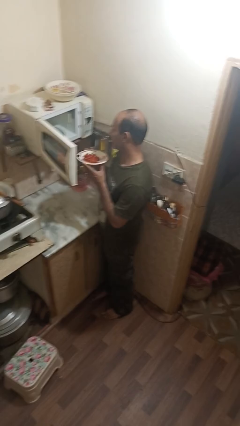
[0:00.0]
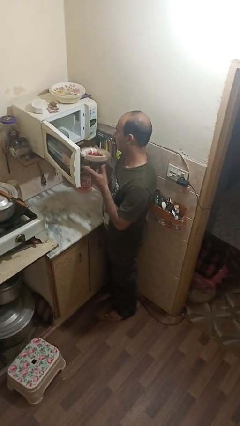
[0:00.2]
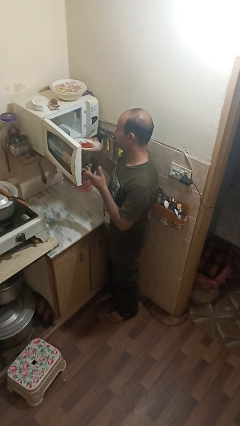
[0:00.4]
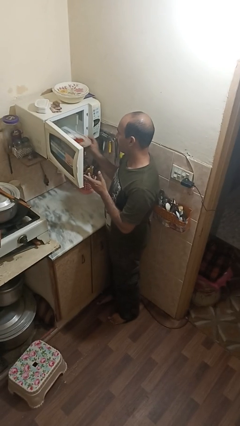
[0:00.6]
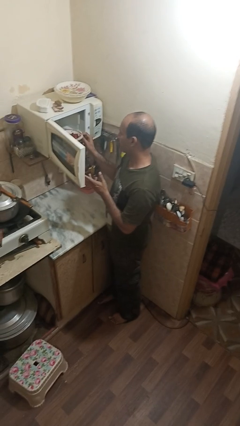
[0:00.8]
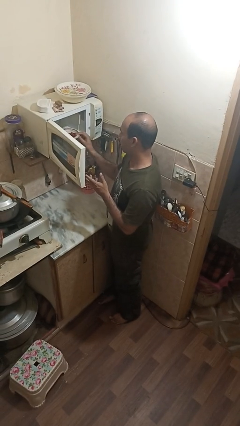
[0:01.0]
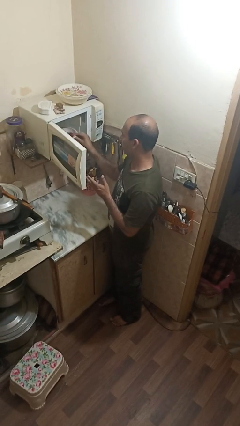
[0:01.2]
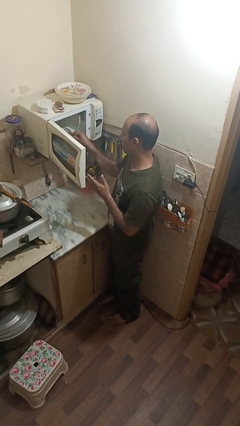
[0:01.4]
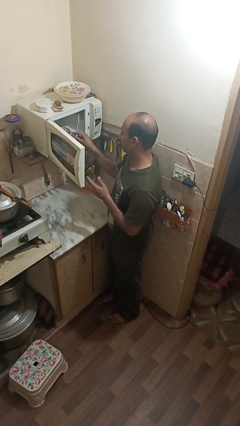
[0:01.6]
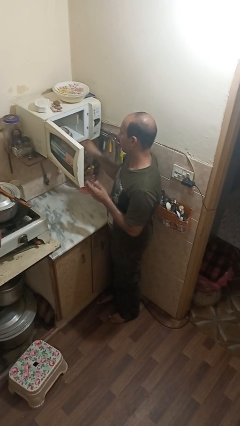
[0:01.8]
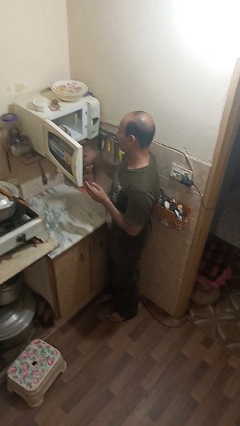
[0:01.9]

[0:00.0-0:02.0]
person puts object into microwave

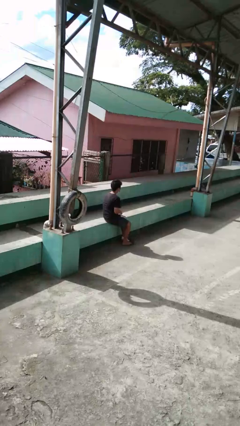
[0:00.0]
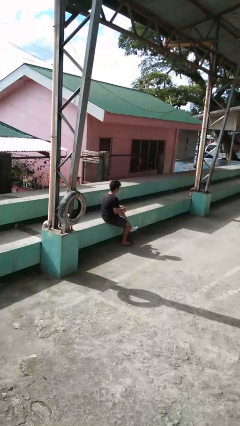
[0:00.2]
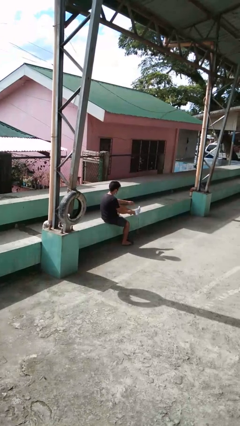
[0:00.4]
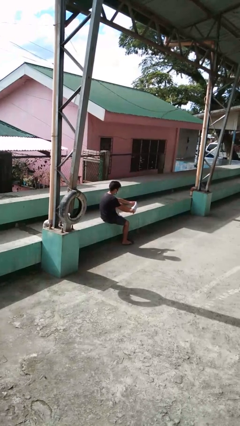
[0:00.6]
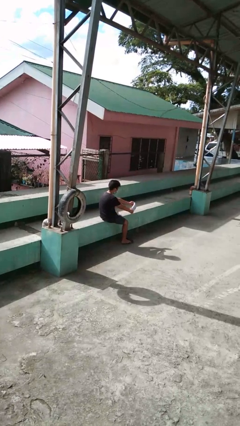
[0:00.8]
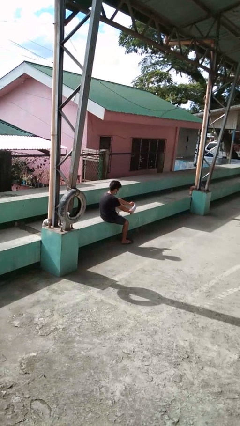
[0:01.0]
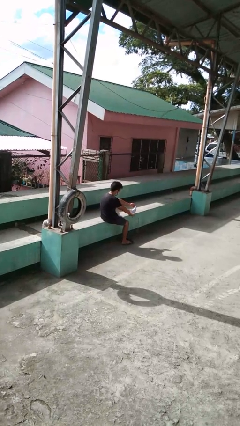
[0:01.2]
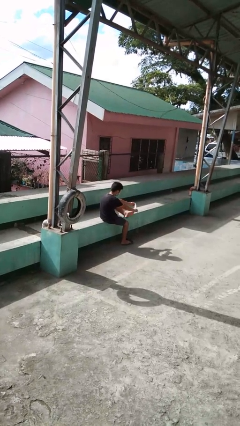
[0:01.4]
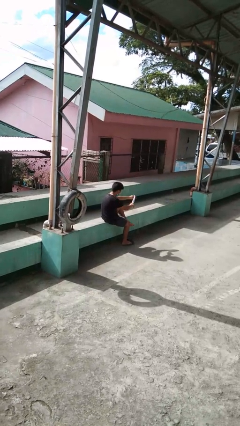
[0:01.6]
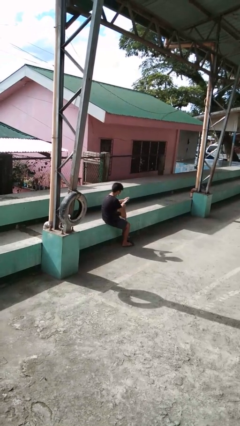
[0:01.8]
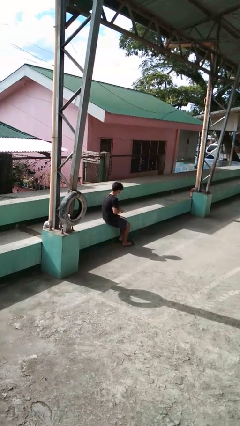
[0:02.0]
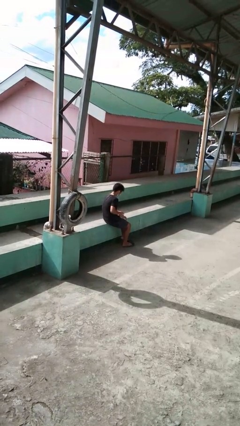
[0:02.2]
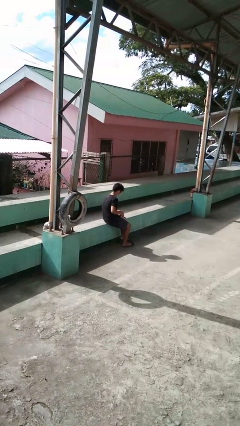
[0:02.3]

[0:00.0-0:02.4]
person takes off socks

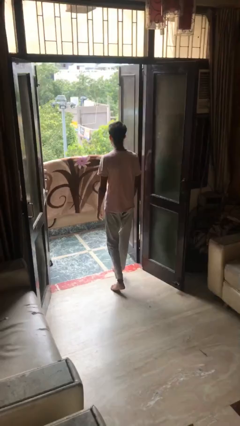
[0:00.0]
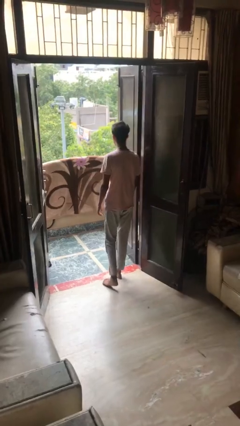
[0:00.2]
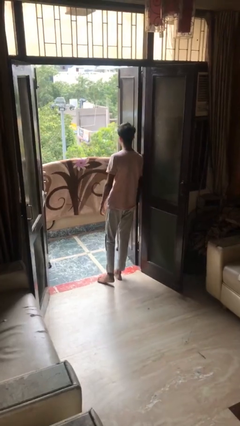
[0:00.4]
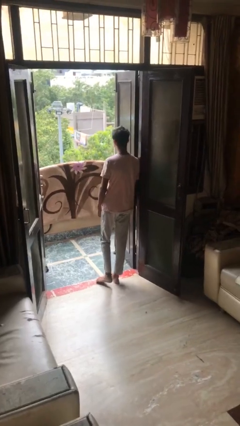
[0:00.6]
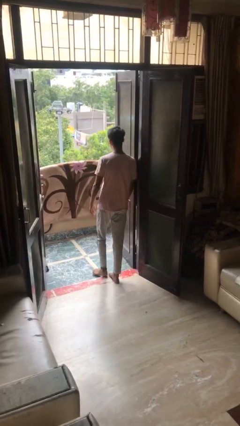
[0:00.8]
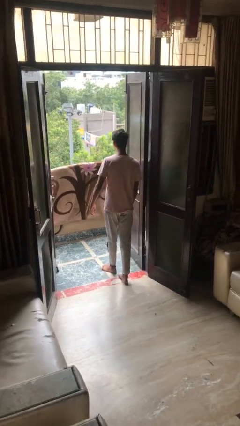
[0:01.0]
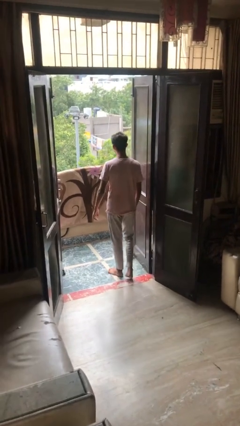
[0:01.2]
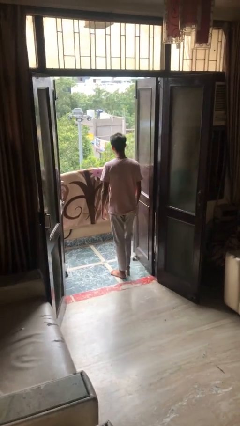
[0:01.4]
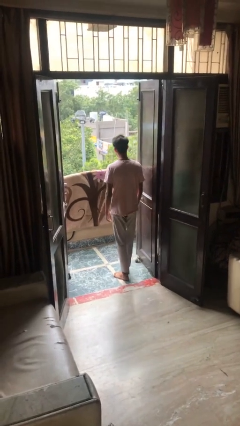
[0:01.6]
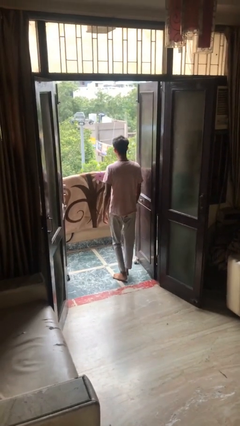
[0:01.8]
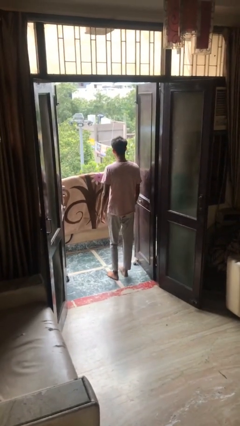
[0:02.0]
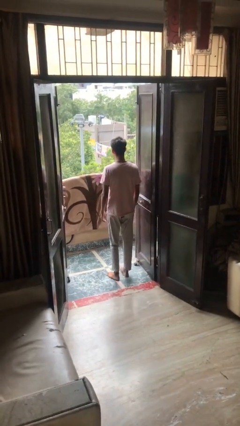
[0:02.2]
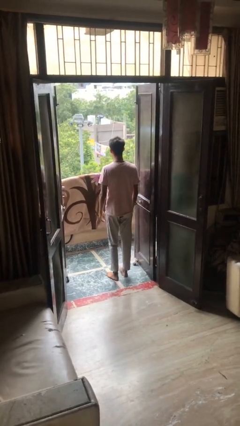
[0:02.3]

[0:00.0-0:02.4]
person bumps into wall

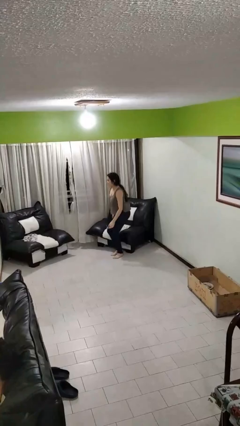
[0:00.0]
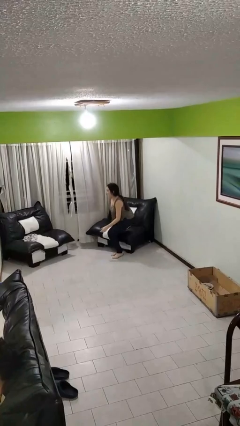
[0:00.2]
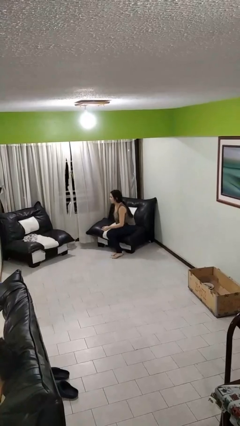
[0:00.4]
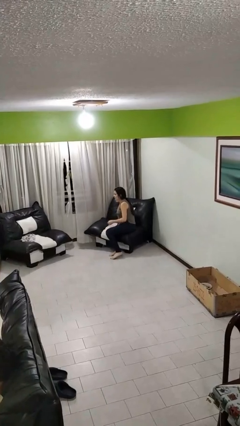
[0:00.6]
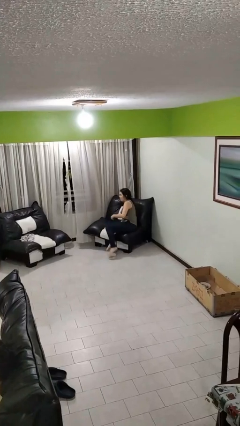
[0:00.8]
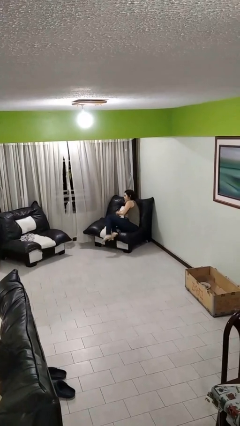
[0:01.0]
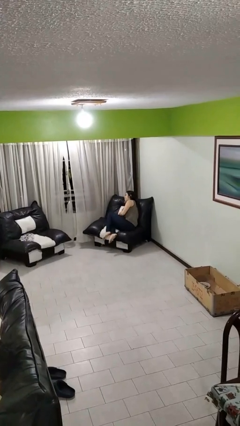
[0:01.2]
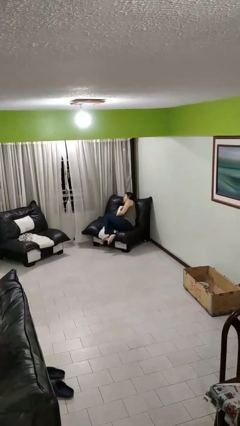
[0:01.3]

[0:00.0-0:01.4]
person lies down on couch

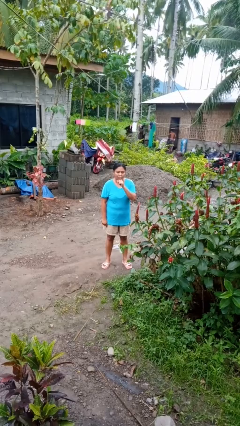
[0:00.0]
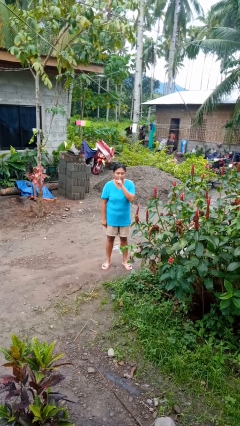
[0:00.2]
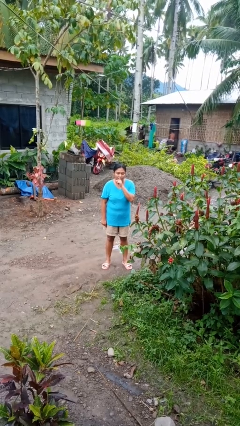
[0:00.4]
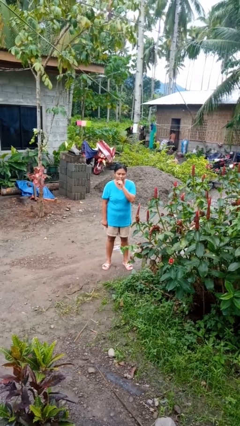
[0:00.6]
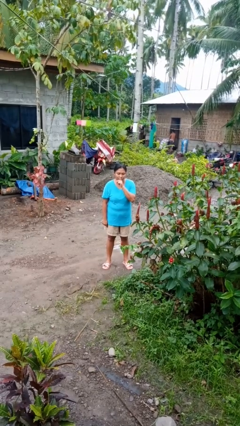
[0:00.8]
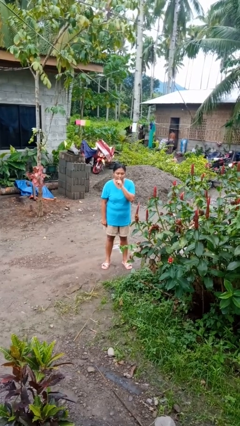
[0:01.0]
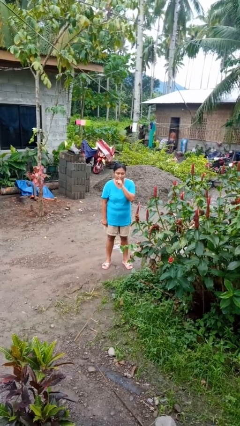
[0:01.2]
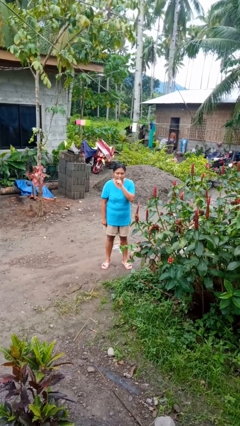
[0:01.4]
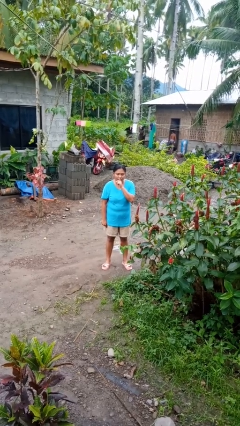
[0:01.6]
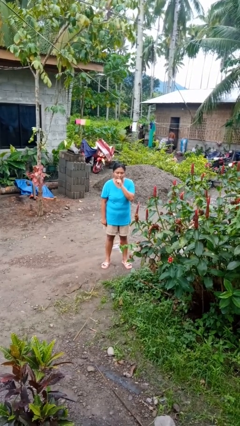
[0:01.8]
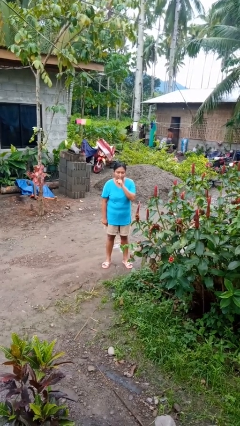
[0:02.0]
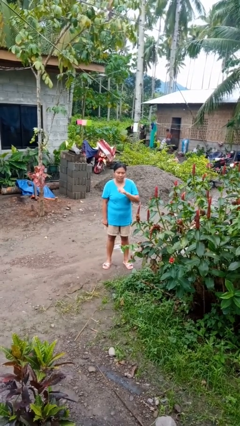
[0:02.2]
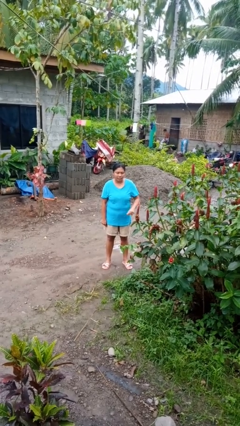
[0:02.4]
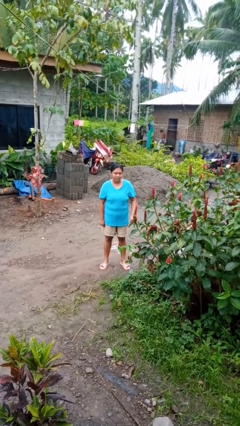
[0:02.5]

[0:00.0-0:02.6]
person gestures be quiet

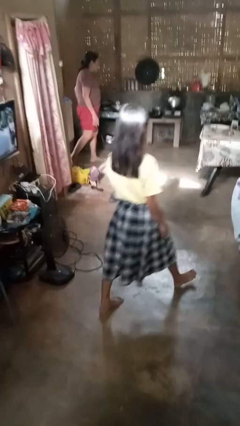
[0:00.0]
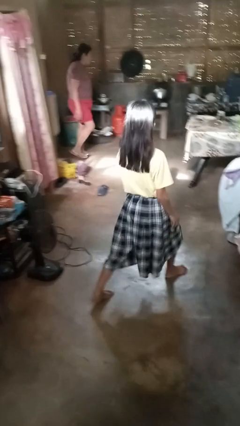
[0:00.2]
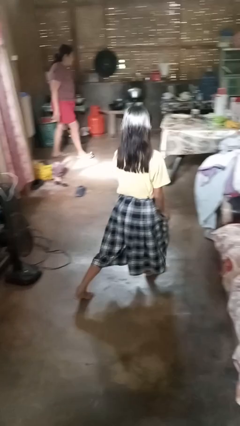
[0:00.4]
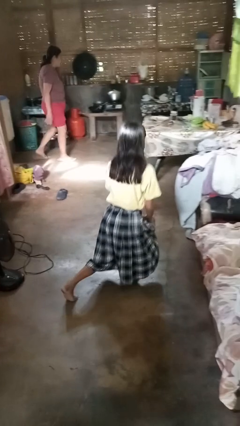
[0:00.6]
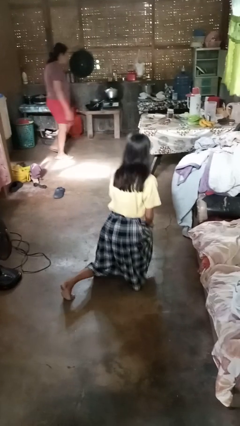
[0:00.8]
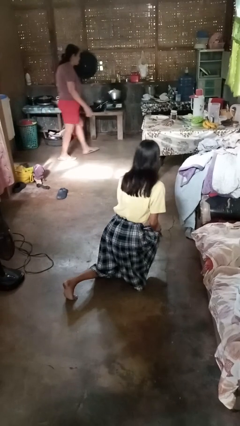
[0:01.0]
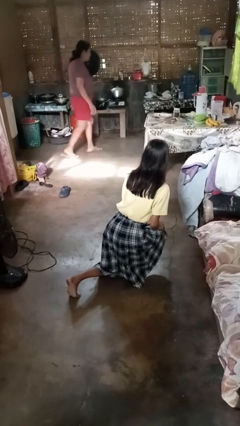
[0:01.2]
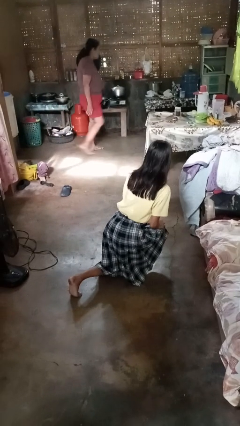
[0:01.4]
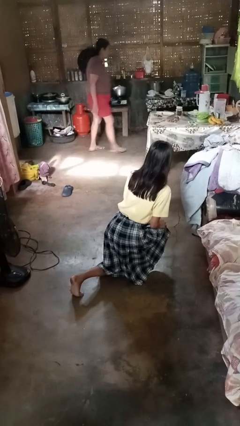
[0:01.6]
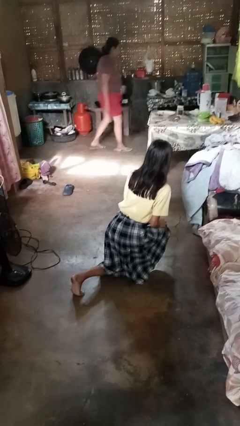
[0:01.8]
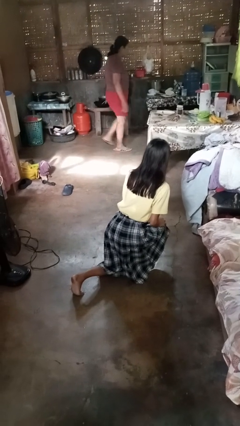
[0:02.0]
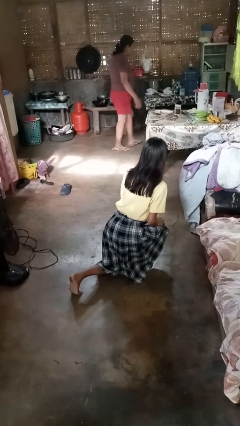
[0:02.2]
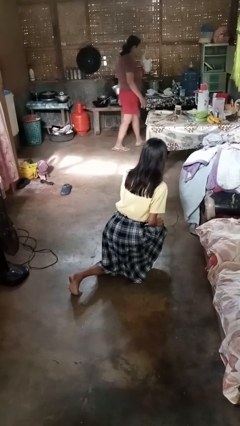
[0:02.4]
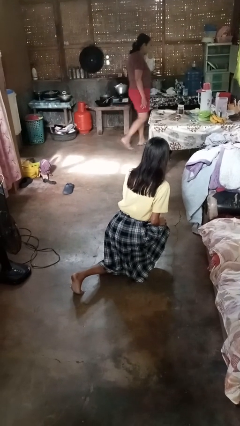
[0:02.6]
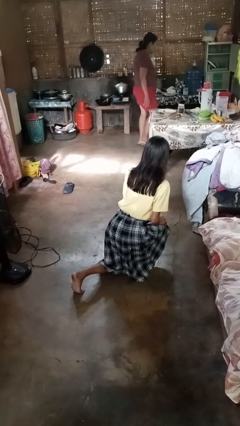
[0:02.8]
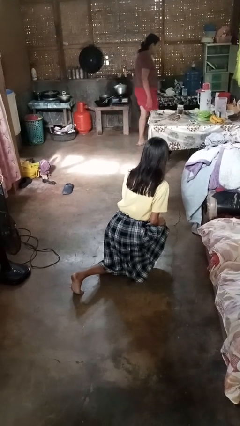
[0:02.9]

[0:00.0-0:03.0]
person exercises with lunges

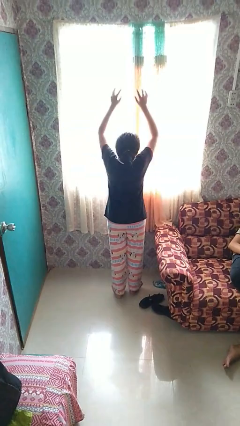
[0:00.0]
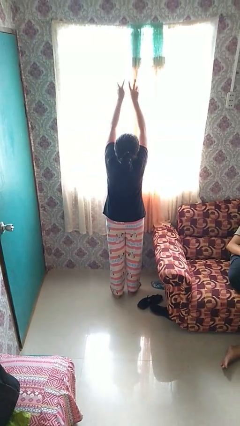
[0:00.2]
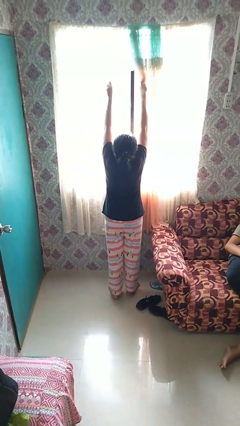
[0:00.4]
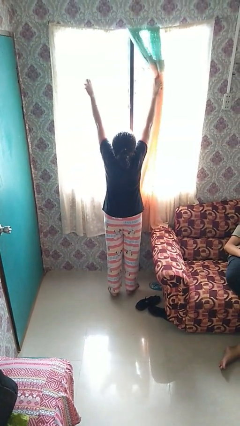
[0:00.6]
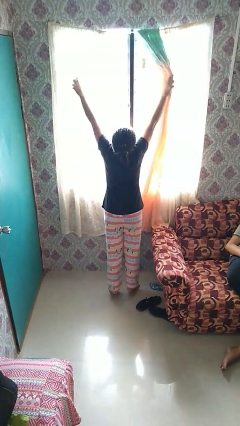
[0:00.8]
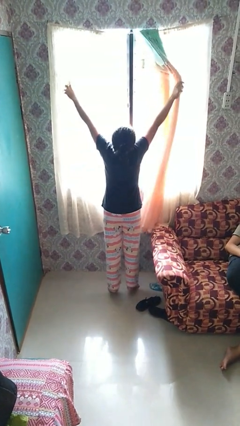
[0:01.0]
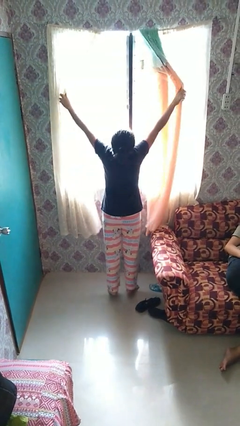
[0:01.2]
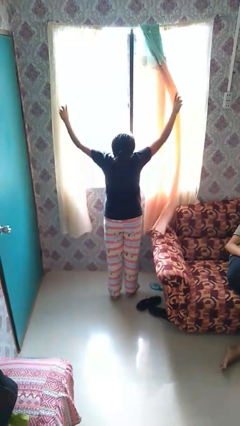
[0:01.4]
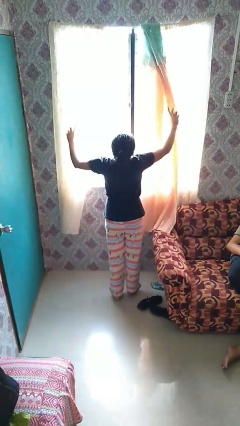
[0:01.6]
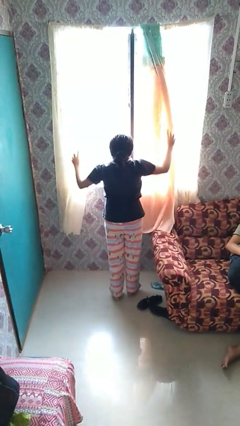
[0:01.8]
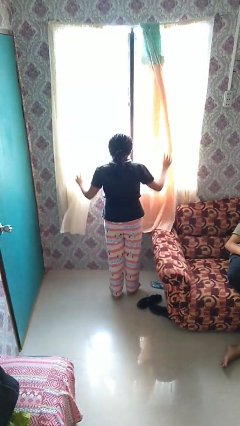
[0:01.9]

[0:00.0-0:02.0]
person opens curtains

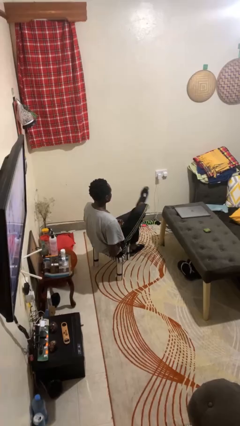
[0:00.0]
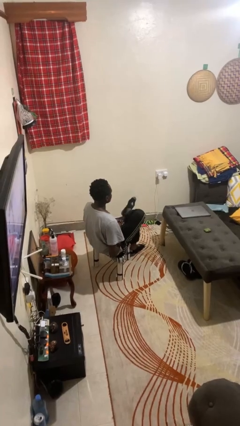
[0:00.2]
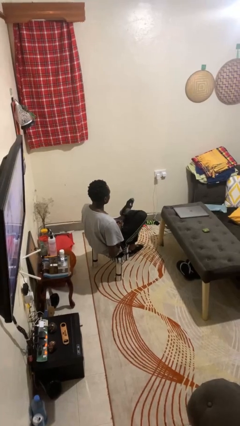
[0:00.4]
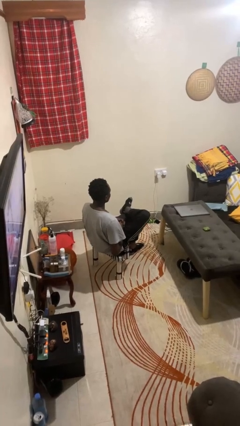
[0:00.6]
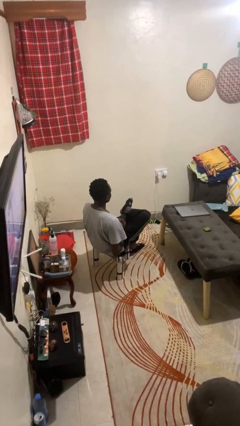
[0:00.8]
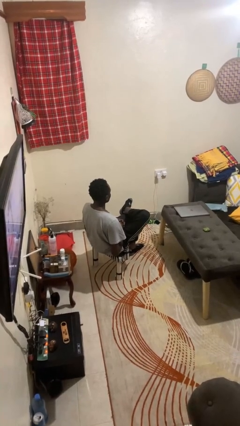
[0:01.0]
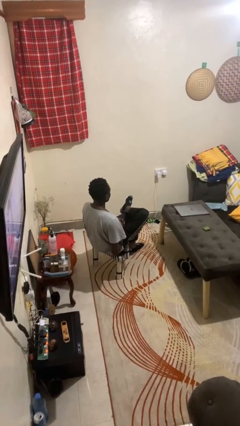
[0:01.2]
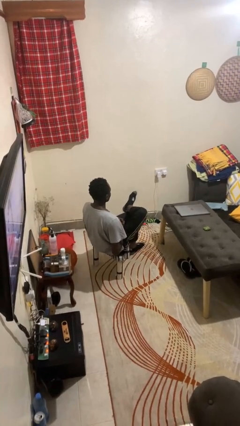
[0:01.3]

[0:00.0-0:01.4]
person crosses legs
